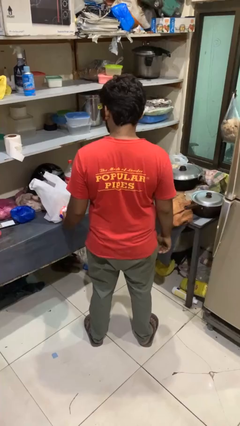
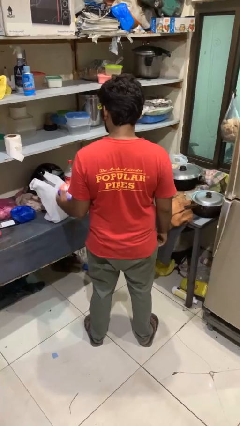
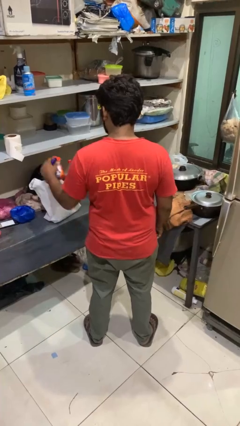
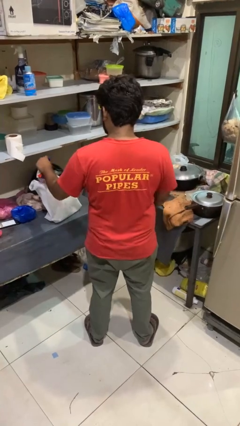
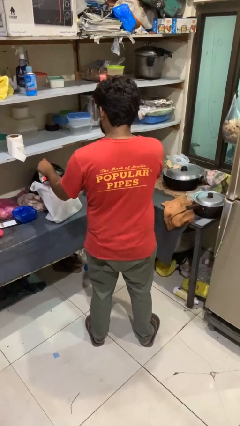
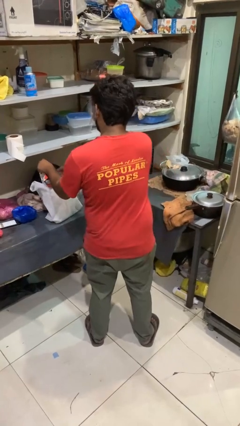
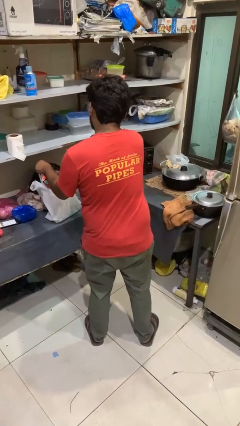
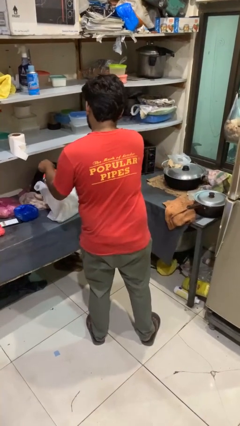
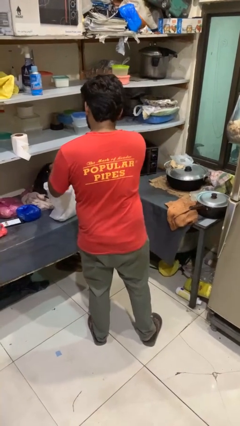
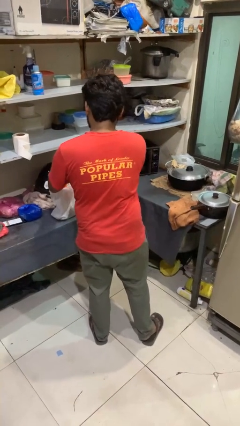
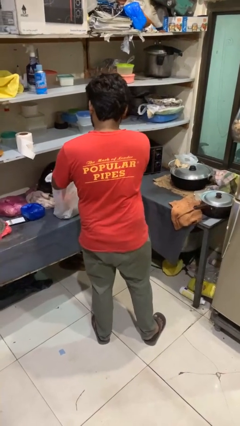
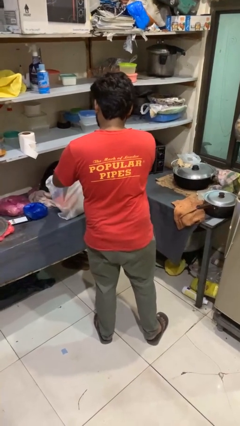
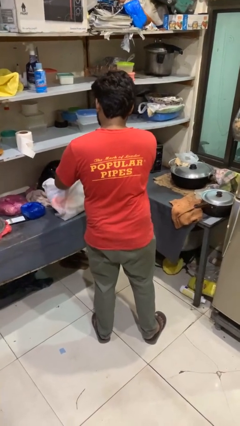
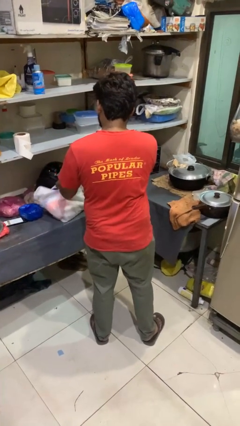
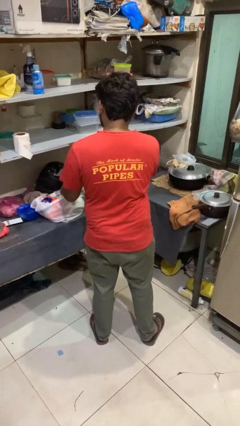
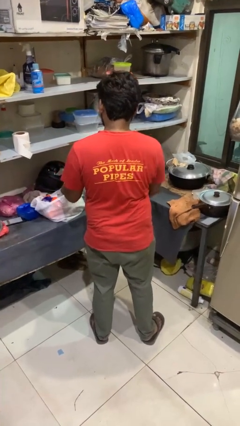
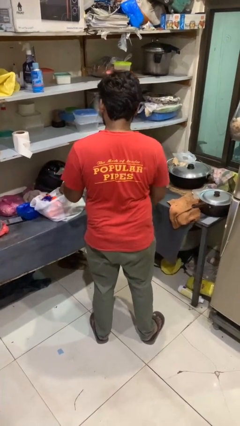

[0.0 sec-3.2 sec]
person puts object into bag

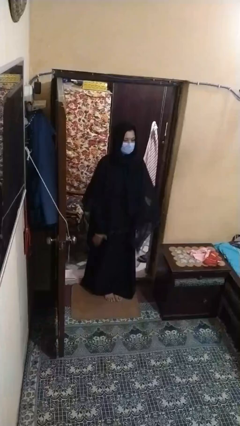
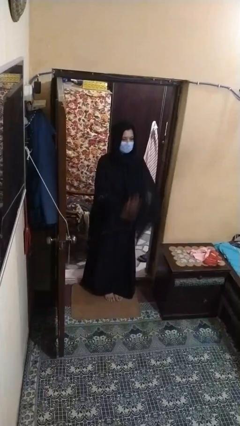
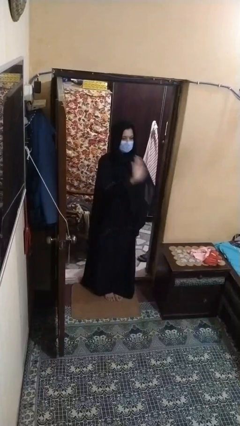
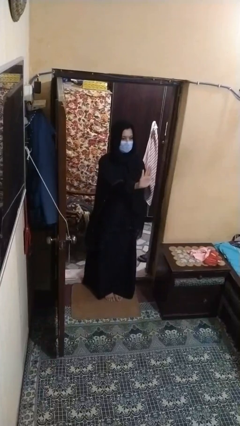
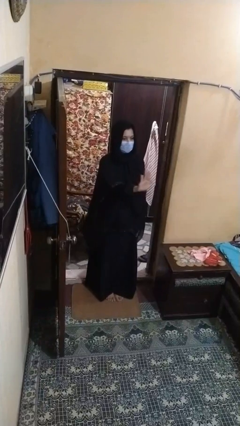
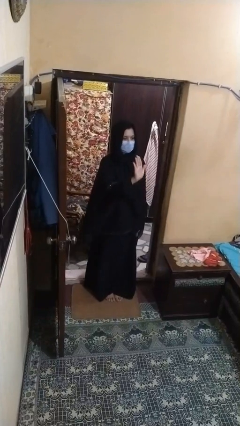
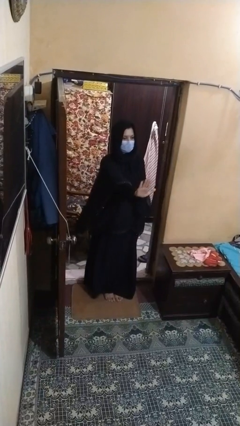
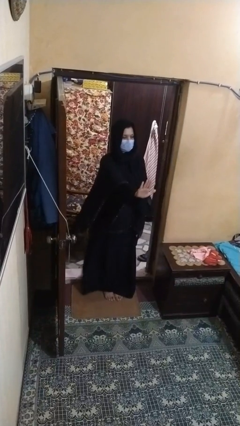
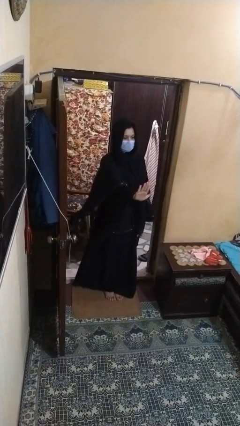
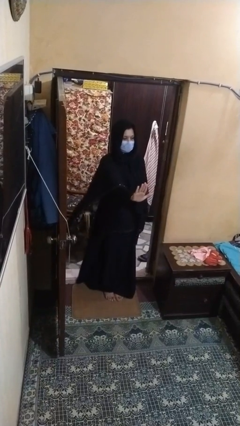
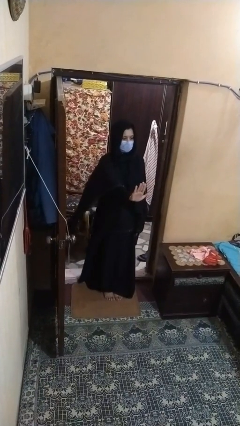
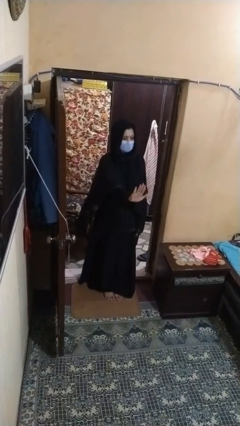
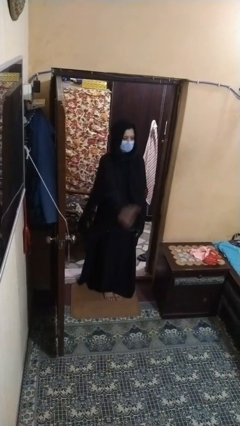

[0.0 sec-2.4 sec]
person gestures stop

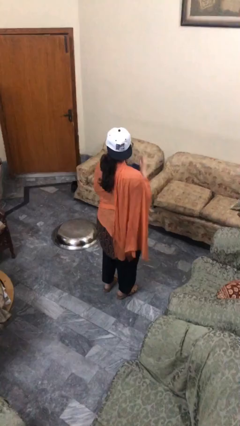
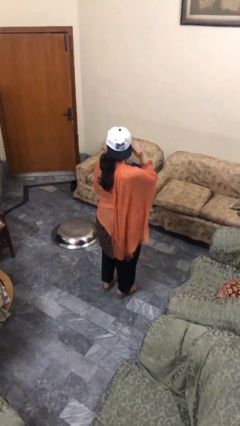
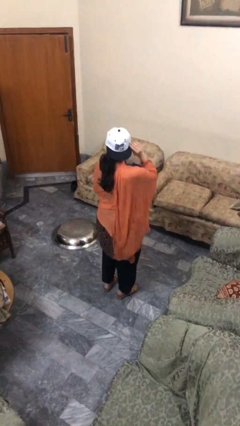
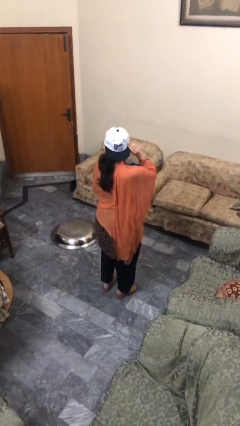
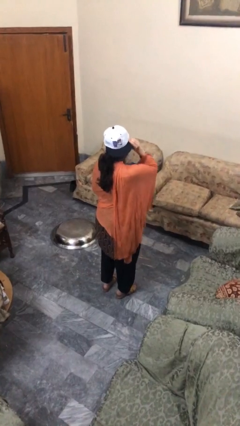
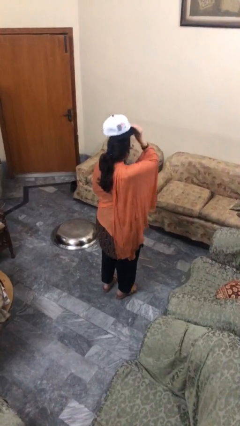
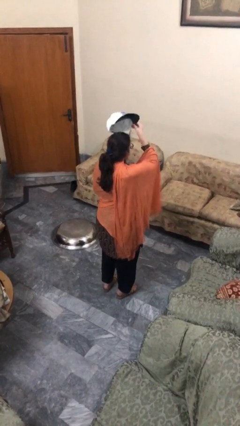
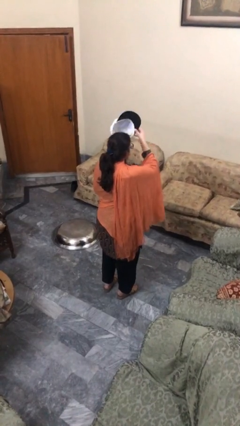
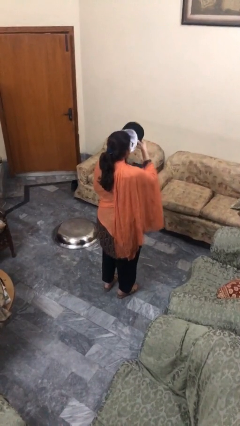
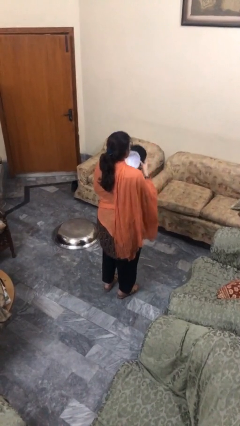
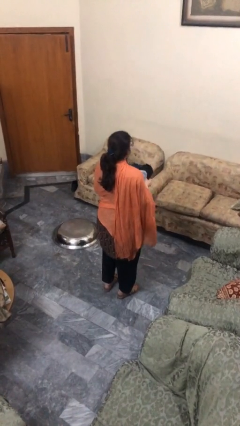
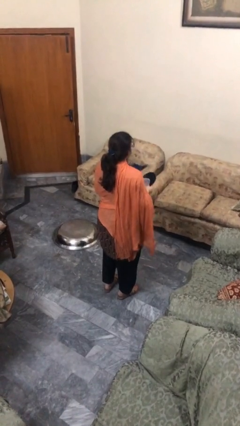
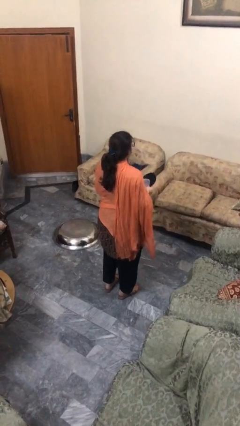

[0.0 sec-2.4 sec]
person takes off hat

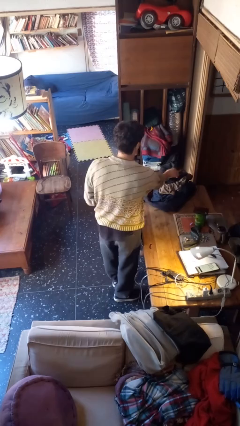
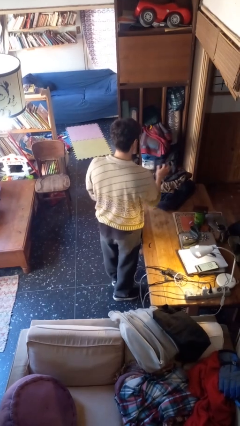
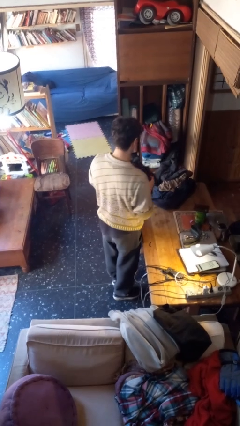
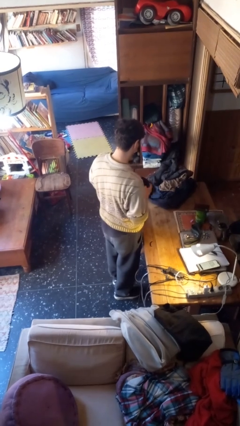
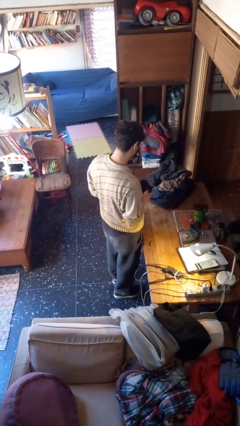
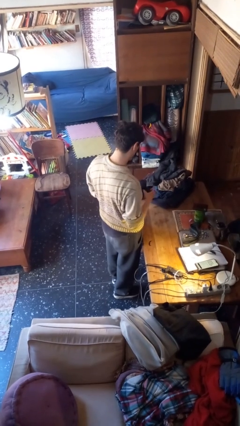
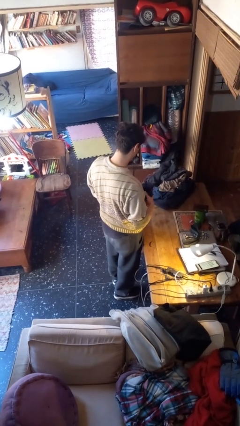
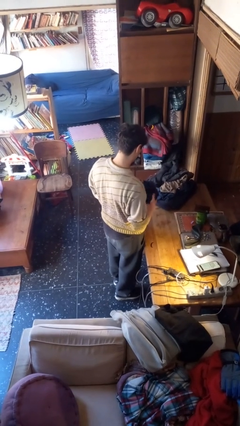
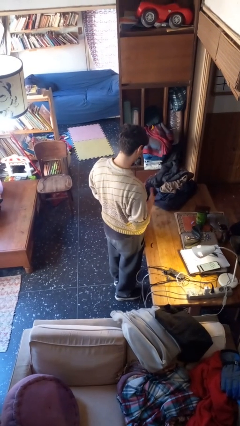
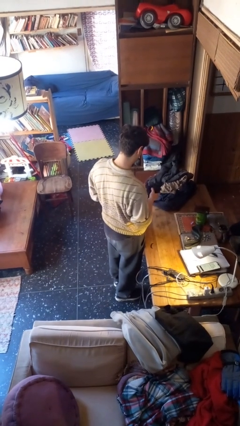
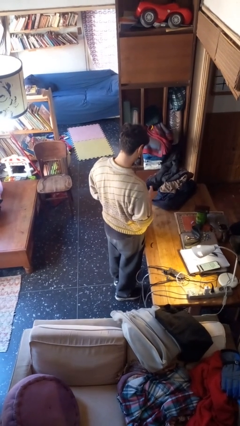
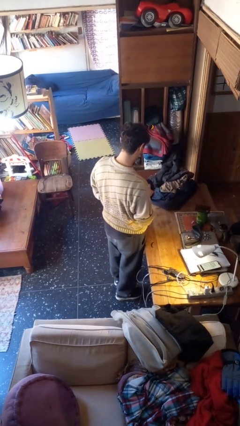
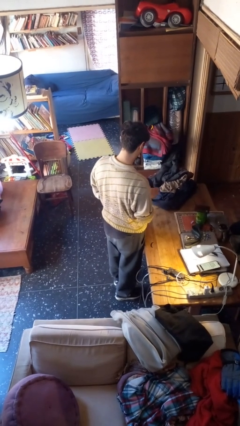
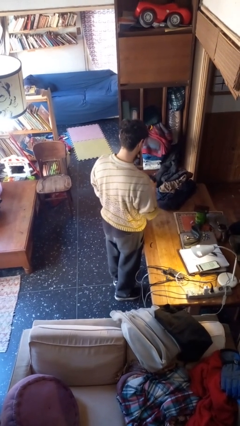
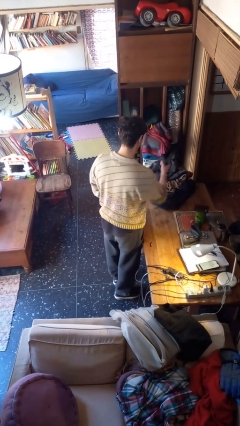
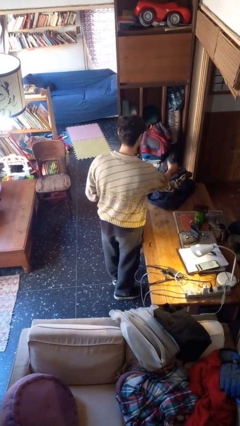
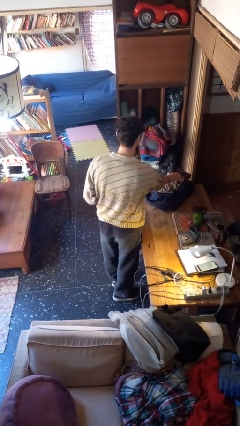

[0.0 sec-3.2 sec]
person folds socks

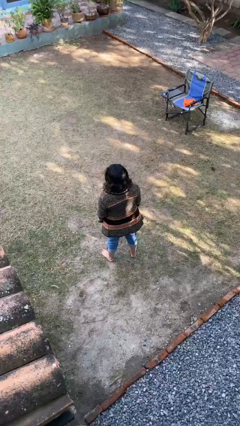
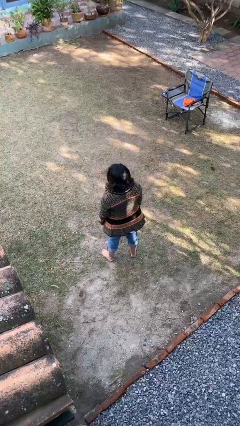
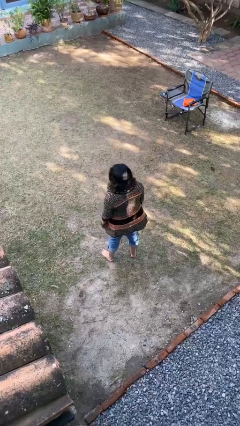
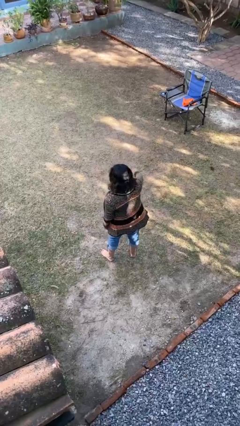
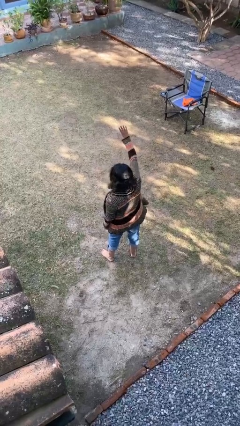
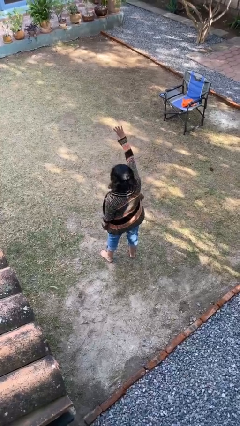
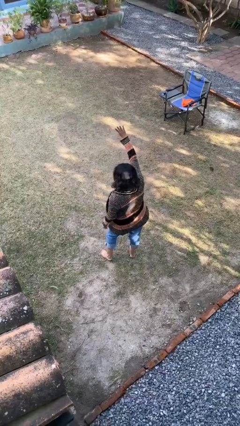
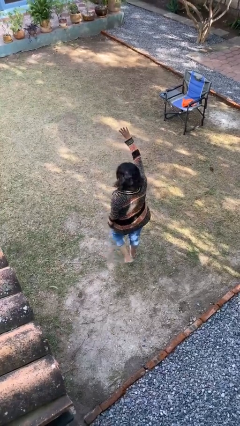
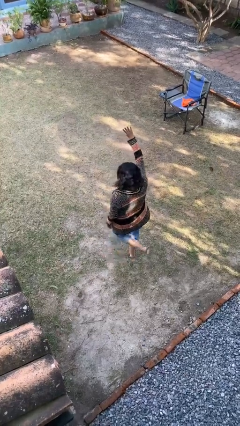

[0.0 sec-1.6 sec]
person gestures number four

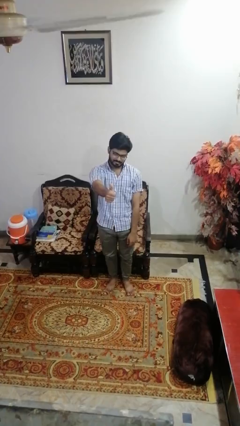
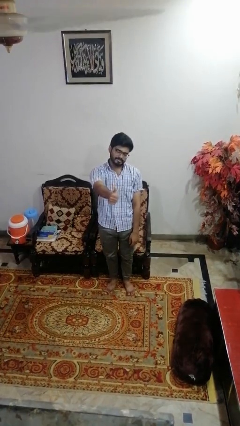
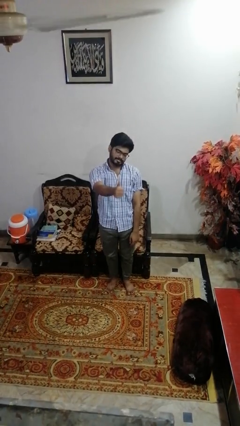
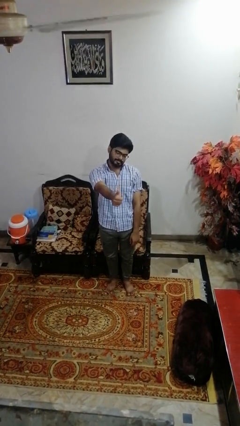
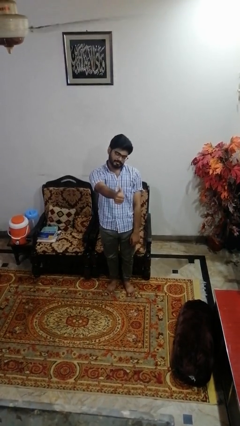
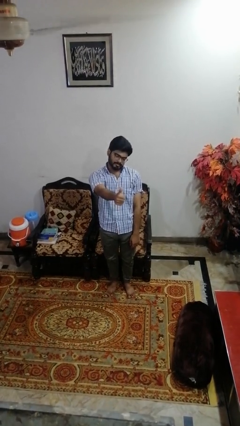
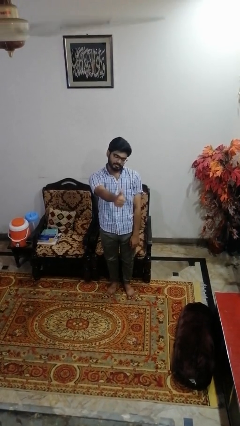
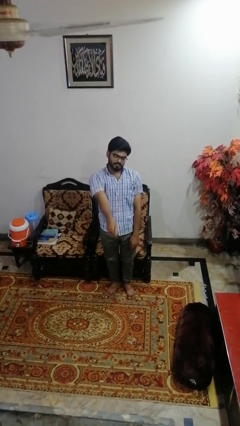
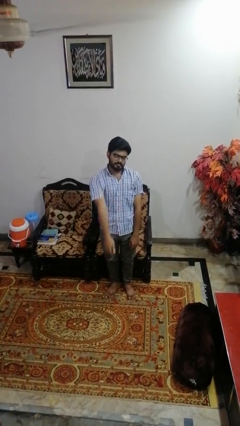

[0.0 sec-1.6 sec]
person gestures thumbs up

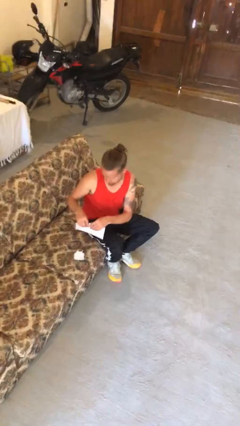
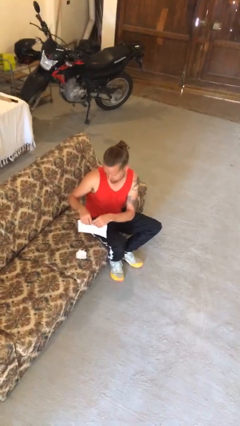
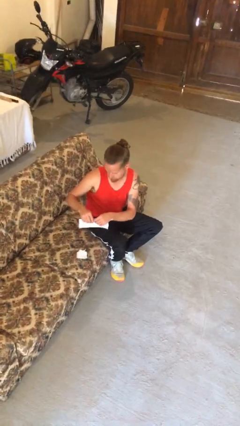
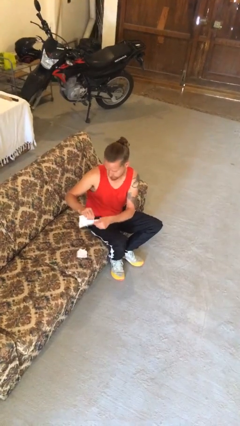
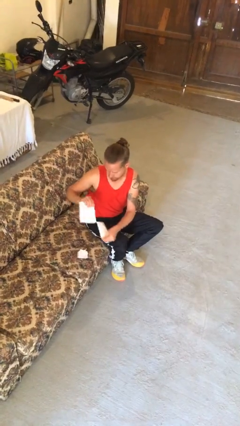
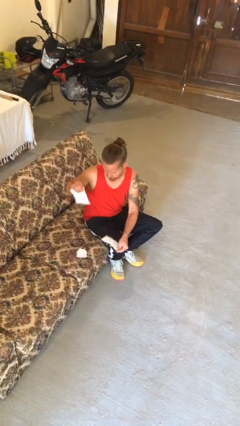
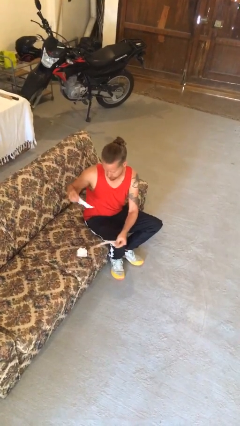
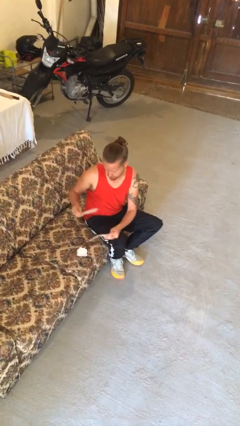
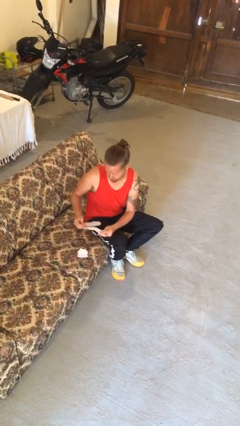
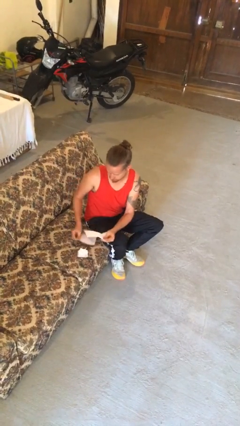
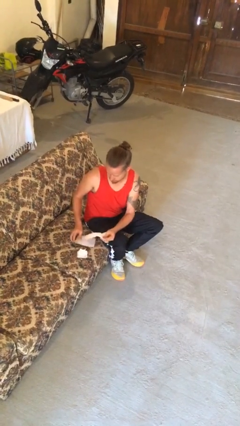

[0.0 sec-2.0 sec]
person tears paper

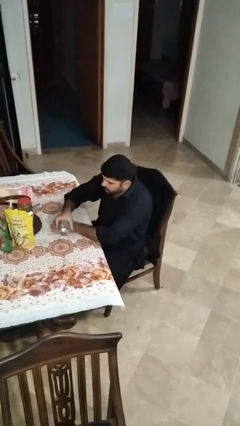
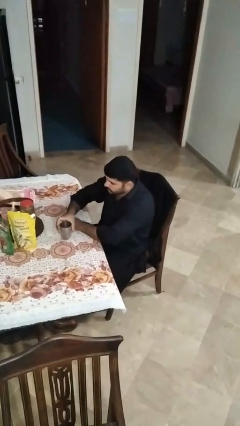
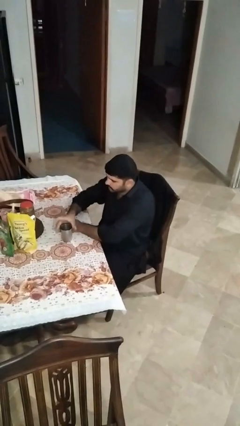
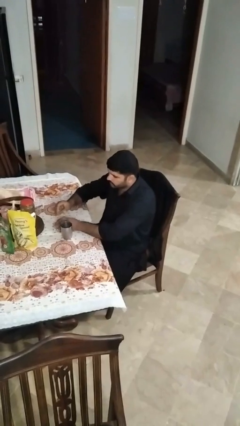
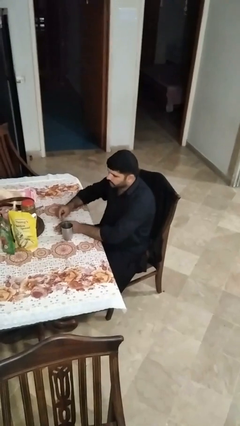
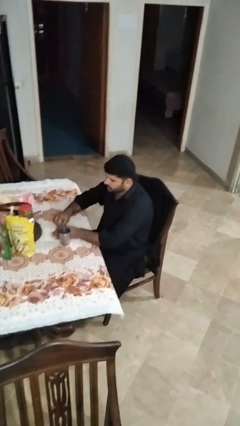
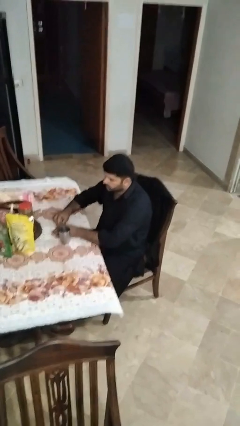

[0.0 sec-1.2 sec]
person sets upright glass
